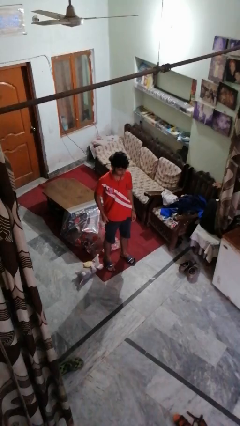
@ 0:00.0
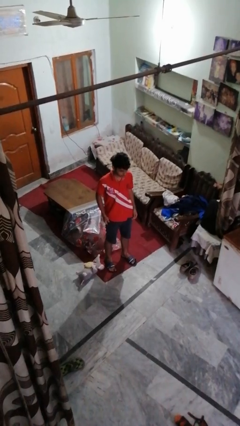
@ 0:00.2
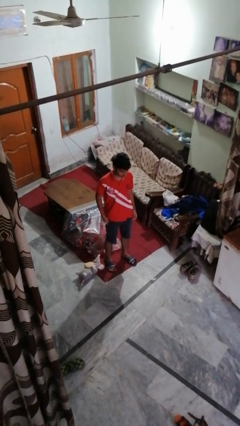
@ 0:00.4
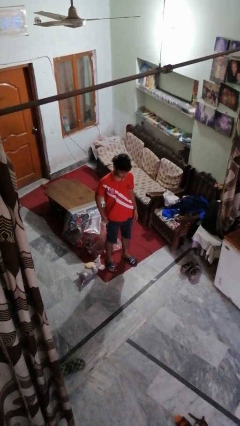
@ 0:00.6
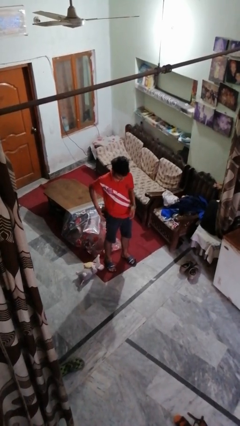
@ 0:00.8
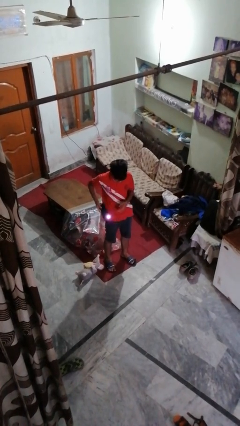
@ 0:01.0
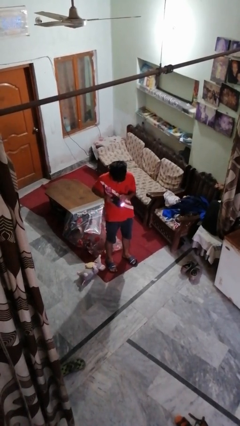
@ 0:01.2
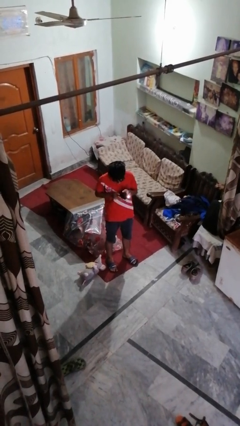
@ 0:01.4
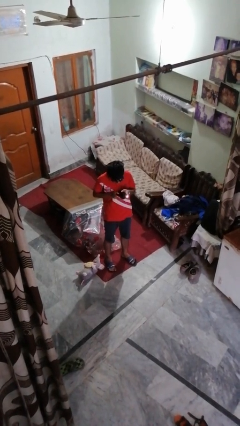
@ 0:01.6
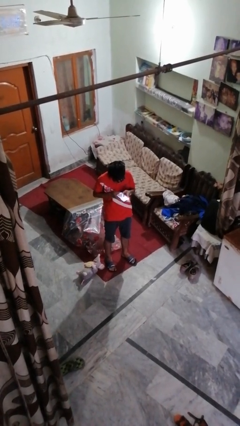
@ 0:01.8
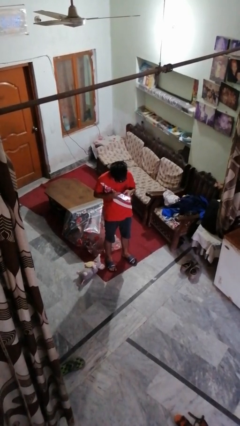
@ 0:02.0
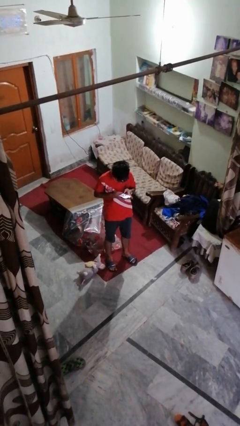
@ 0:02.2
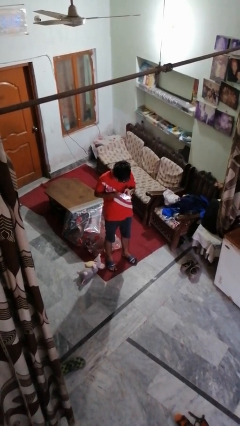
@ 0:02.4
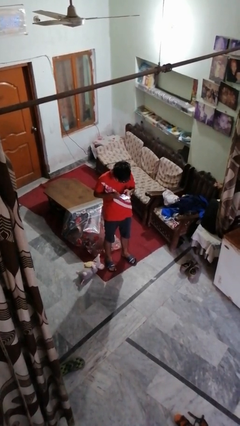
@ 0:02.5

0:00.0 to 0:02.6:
person takes phone from pocket

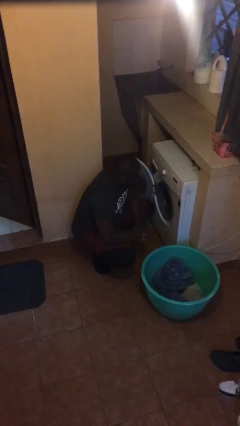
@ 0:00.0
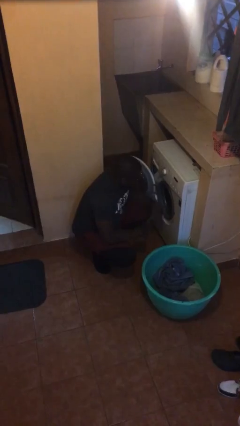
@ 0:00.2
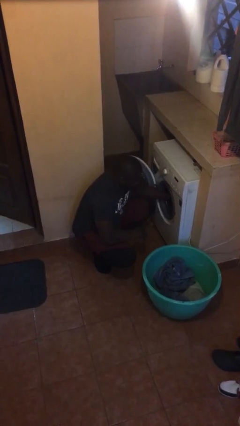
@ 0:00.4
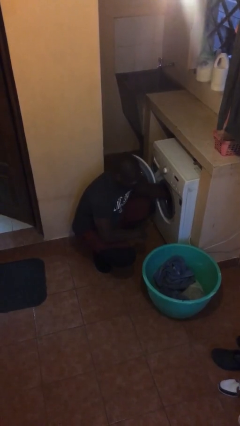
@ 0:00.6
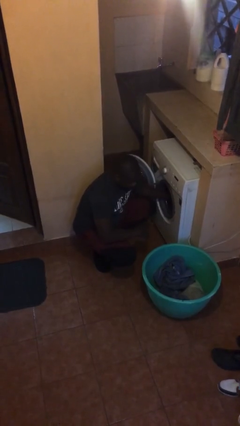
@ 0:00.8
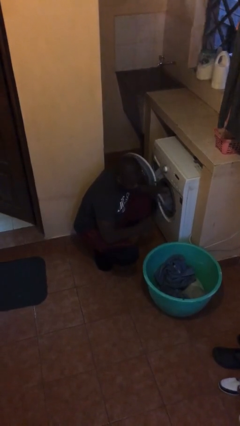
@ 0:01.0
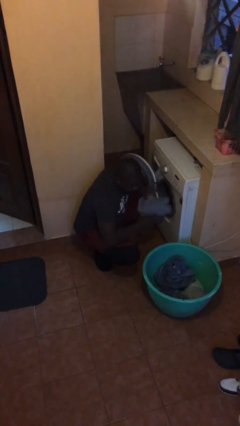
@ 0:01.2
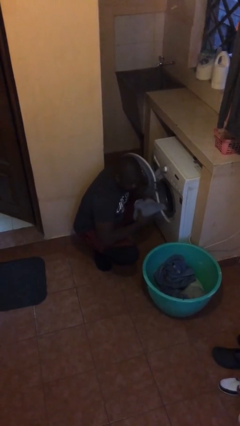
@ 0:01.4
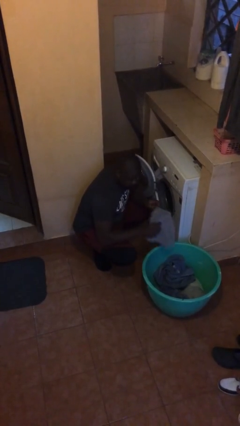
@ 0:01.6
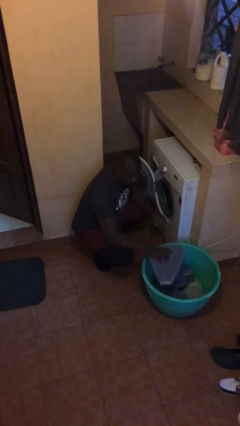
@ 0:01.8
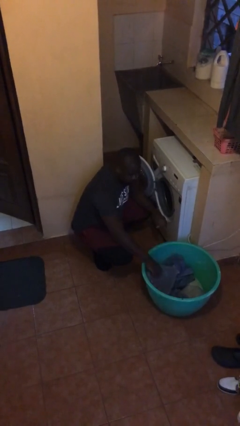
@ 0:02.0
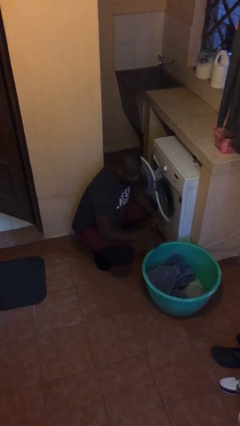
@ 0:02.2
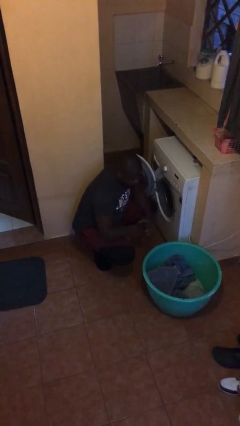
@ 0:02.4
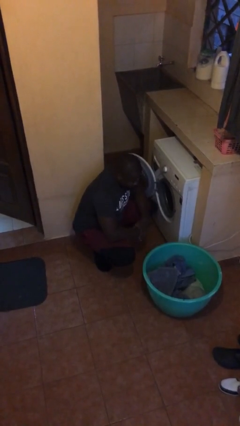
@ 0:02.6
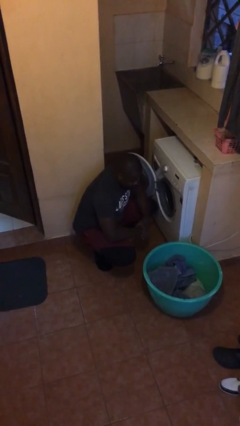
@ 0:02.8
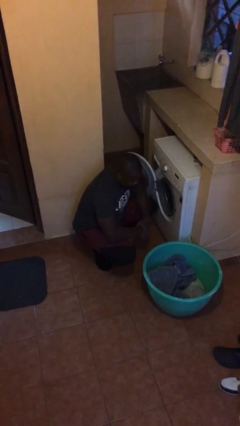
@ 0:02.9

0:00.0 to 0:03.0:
person unloads dryer

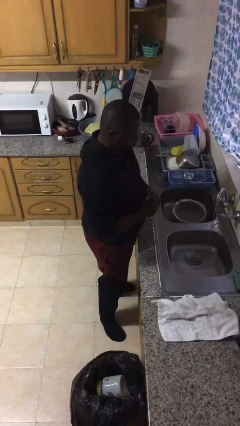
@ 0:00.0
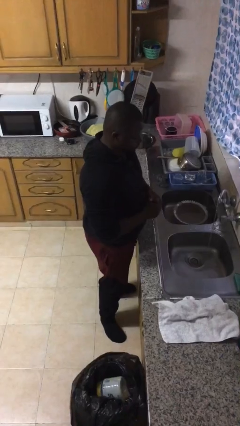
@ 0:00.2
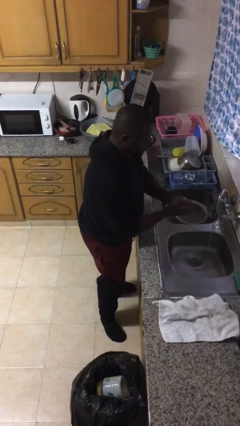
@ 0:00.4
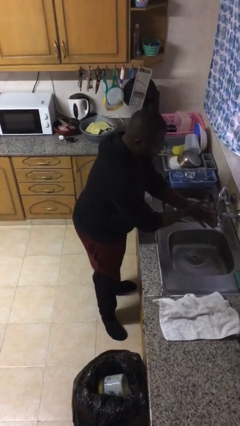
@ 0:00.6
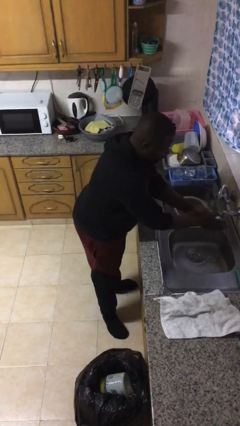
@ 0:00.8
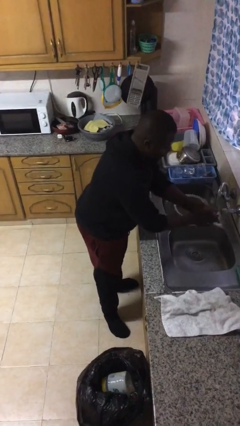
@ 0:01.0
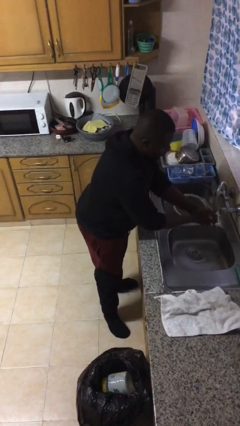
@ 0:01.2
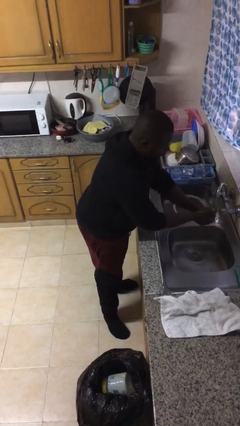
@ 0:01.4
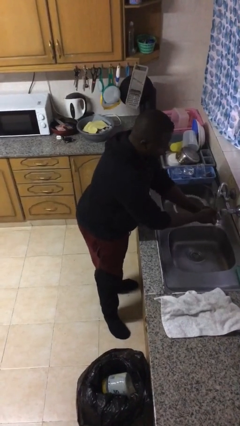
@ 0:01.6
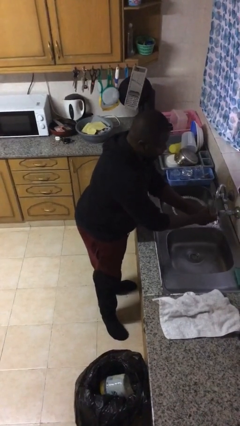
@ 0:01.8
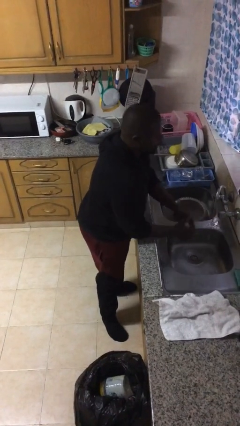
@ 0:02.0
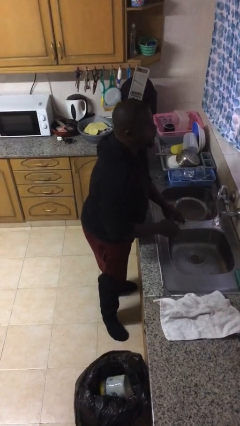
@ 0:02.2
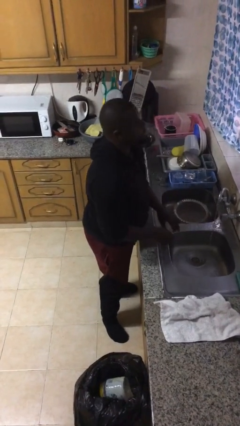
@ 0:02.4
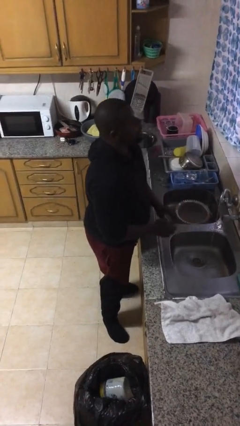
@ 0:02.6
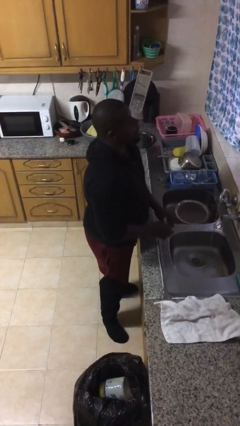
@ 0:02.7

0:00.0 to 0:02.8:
person washes hands

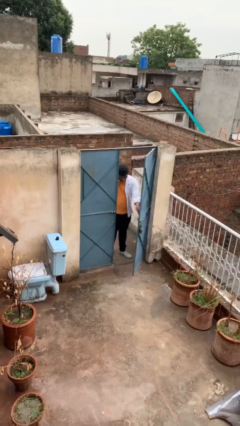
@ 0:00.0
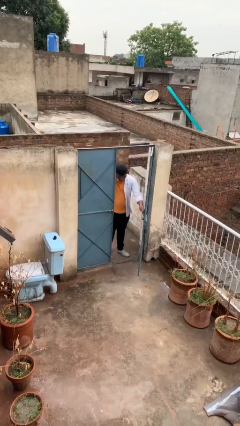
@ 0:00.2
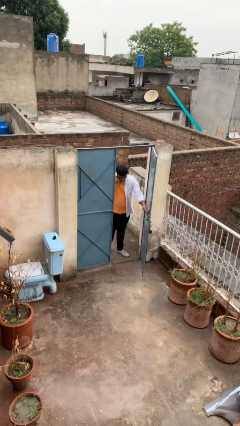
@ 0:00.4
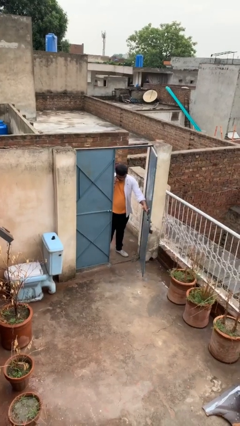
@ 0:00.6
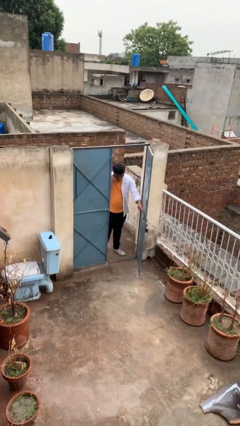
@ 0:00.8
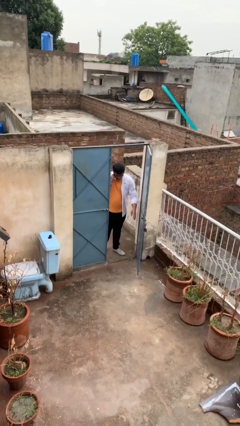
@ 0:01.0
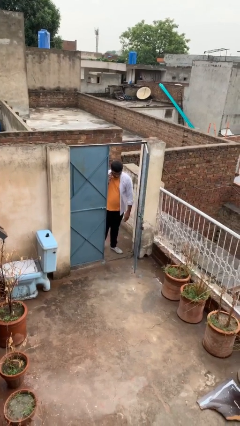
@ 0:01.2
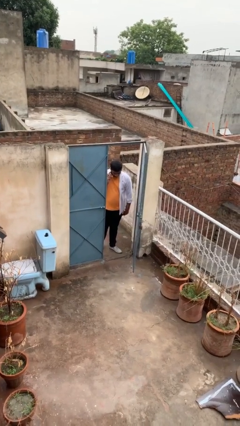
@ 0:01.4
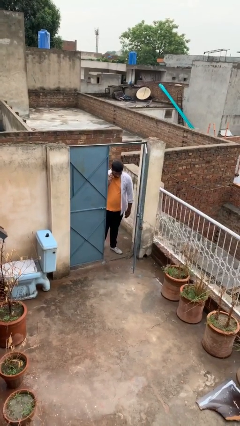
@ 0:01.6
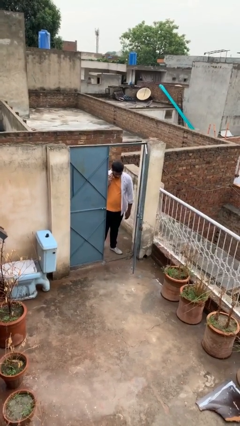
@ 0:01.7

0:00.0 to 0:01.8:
person opens facility door

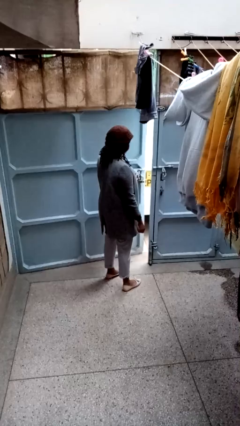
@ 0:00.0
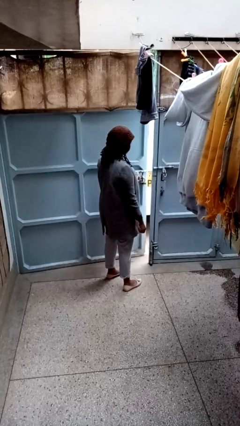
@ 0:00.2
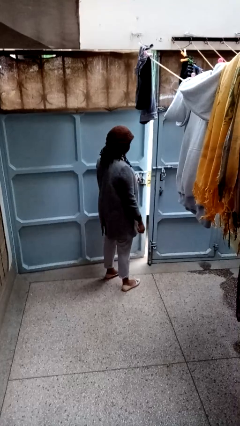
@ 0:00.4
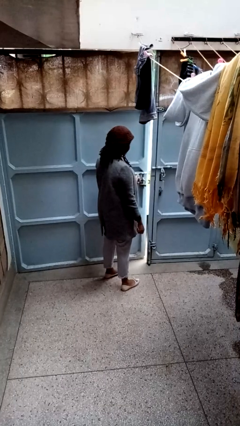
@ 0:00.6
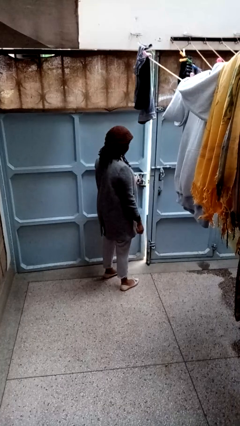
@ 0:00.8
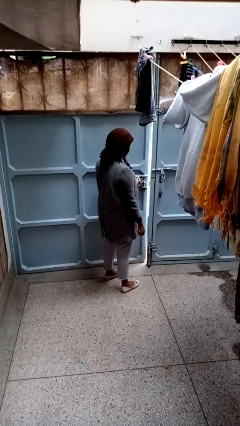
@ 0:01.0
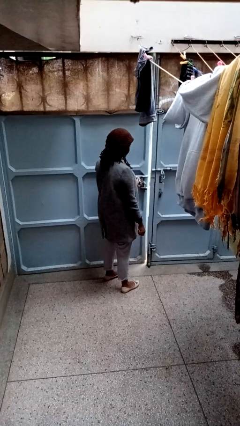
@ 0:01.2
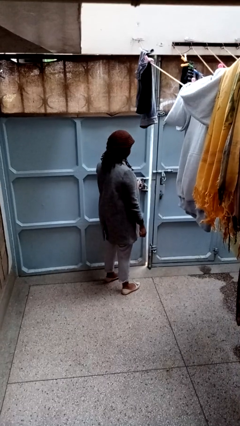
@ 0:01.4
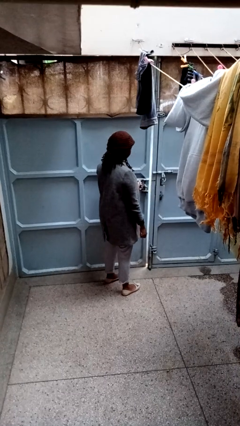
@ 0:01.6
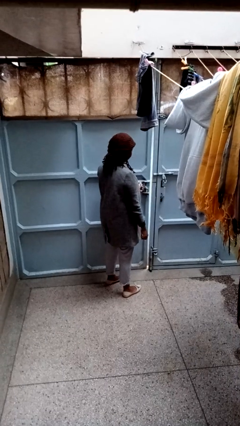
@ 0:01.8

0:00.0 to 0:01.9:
person closes gate

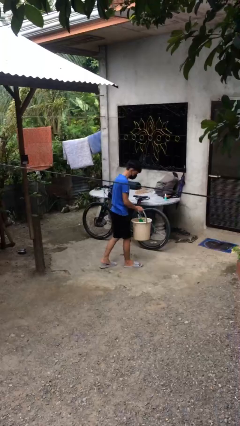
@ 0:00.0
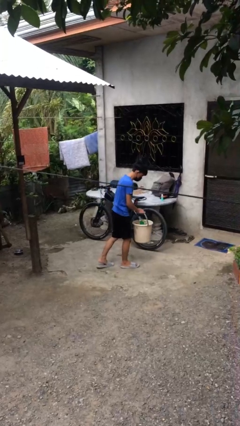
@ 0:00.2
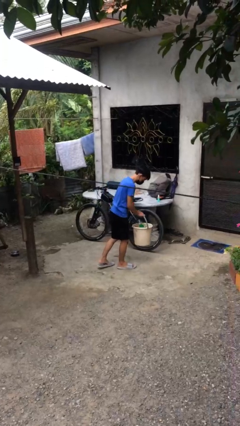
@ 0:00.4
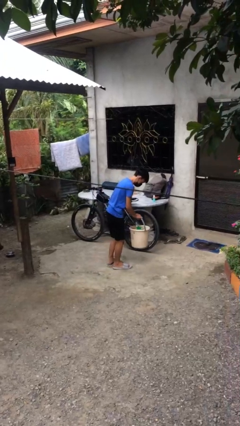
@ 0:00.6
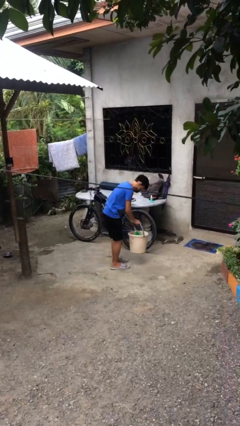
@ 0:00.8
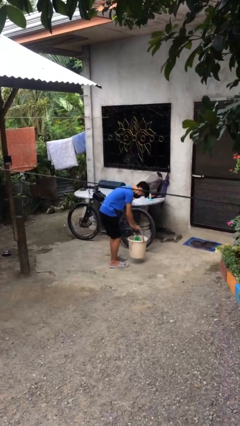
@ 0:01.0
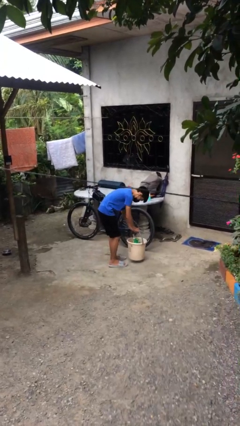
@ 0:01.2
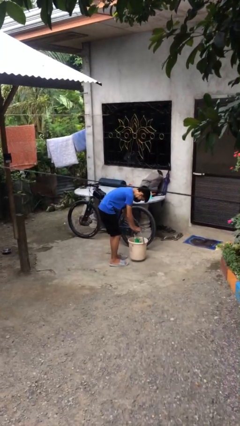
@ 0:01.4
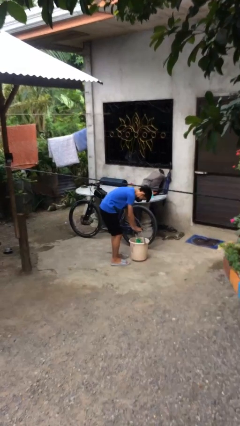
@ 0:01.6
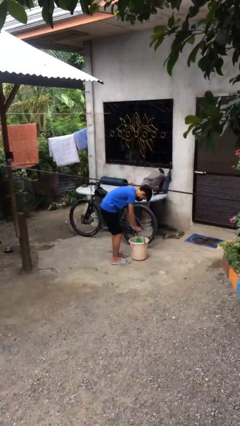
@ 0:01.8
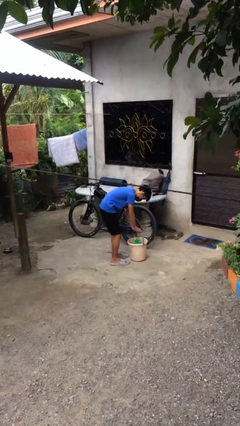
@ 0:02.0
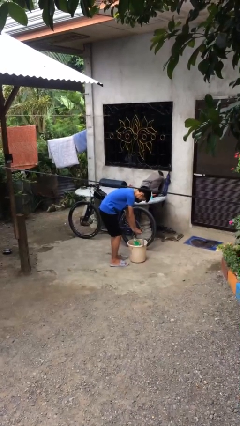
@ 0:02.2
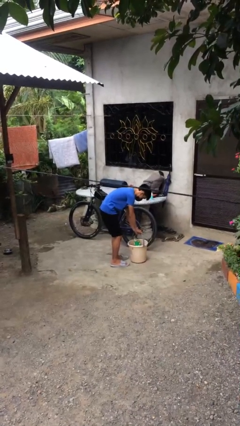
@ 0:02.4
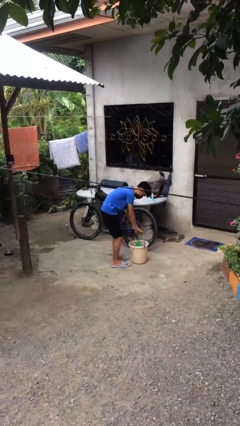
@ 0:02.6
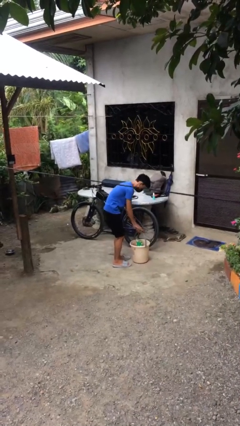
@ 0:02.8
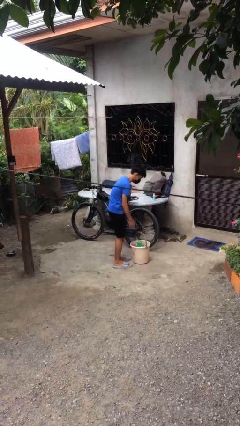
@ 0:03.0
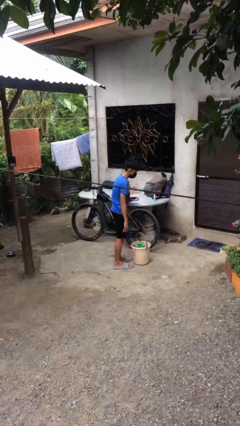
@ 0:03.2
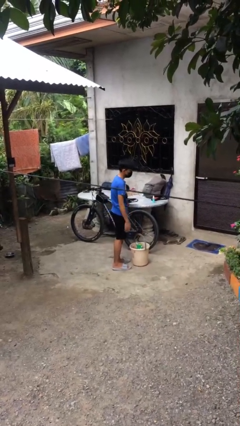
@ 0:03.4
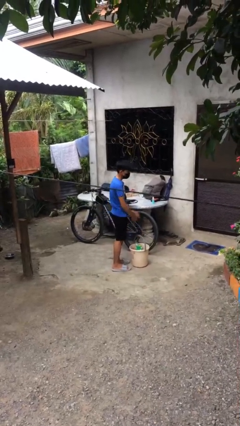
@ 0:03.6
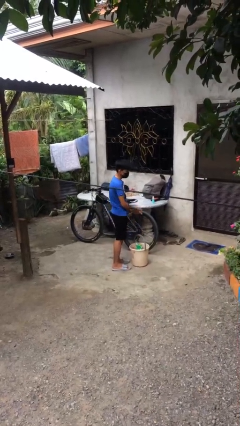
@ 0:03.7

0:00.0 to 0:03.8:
person puts down object on floor

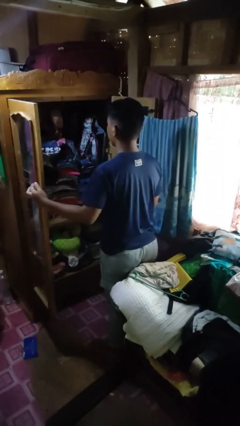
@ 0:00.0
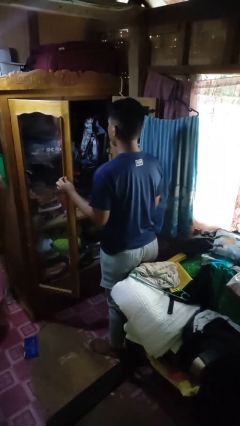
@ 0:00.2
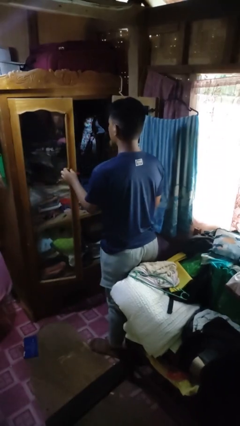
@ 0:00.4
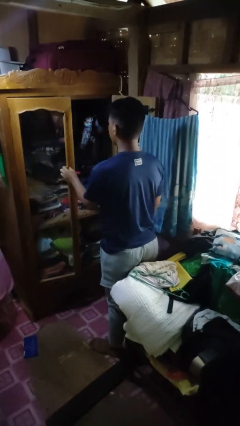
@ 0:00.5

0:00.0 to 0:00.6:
person closes closet door

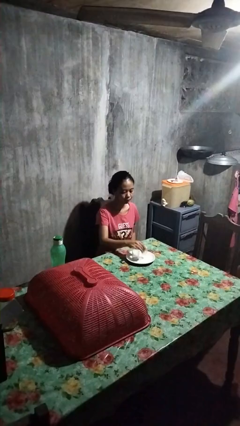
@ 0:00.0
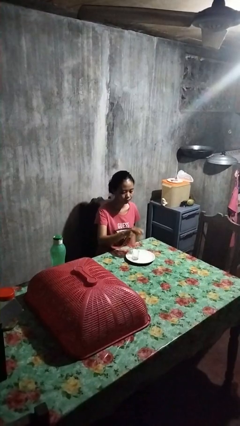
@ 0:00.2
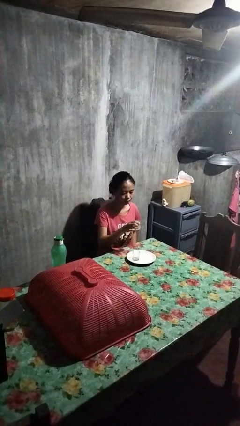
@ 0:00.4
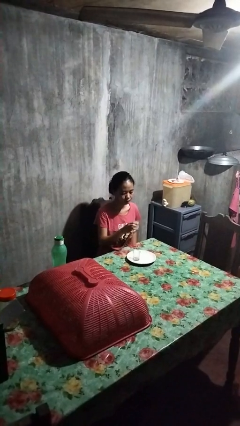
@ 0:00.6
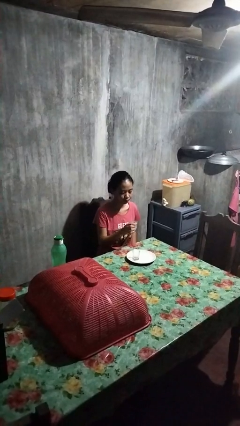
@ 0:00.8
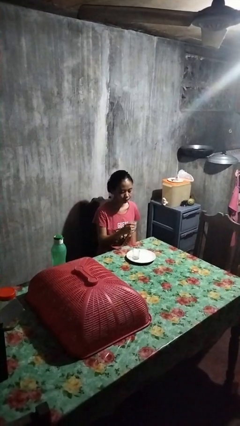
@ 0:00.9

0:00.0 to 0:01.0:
person picks up object from table
